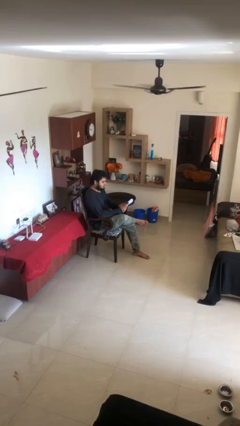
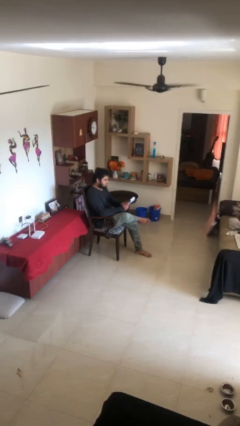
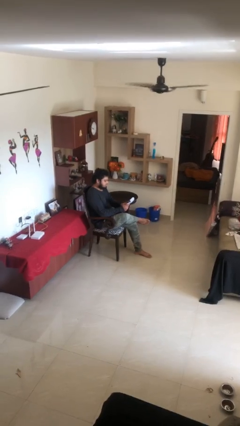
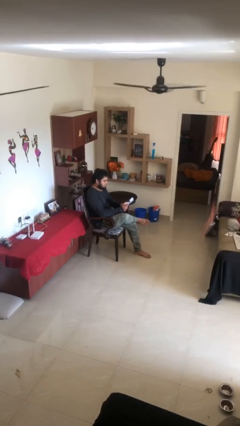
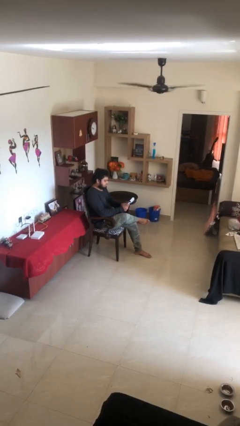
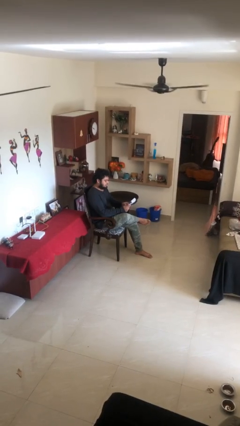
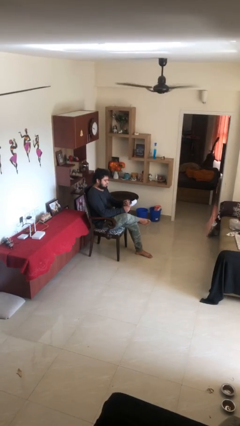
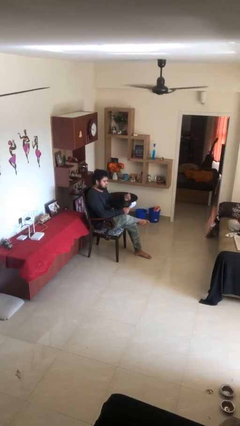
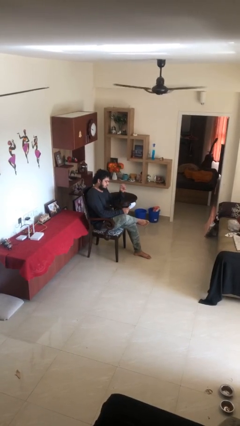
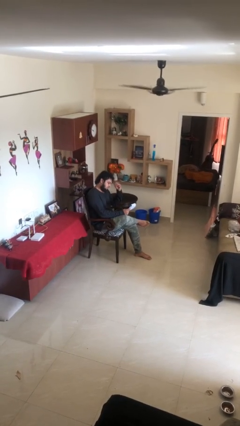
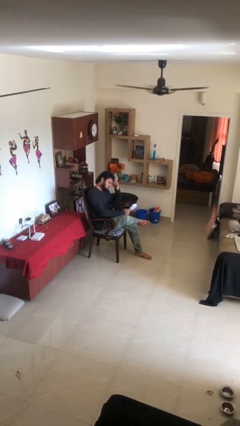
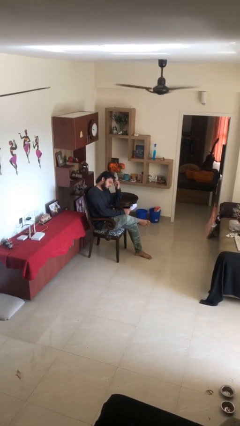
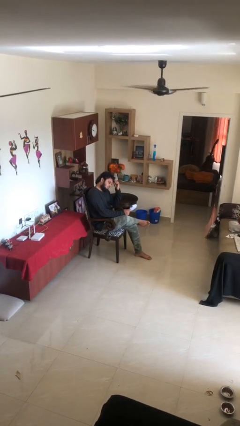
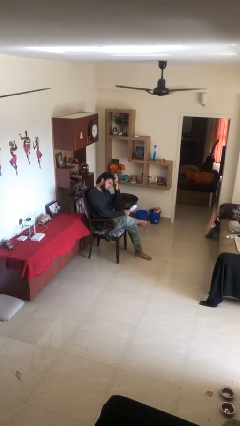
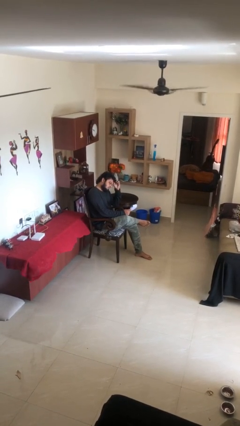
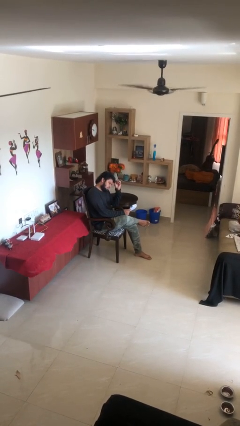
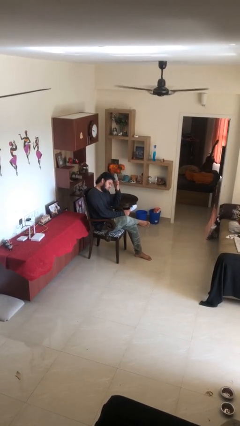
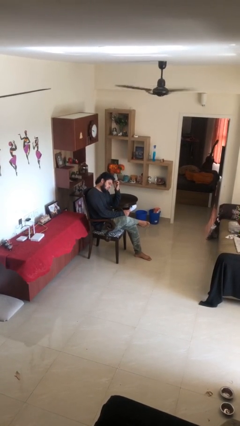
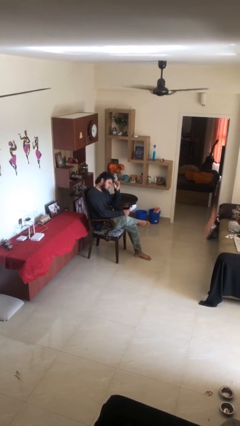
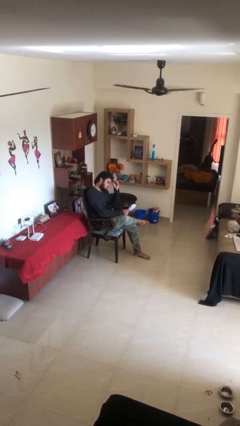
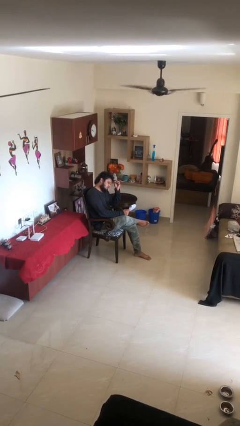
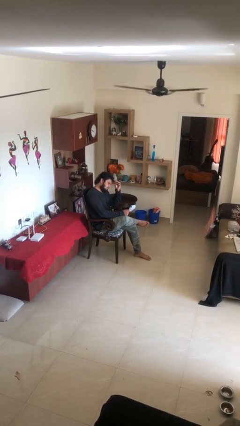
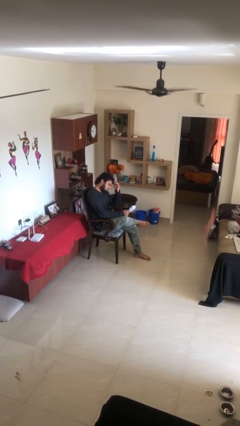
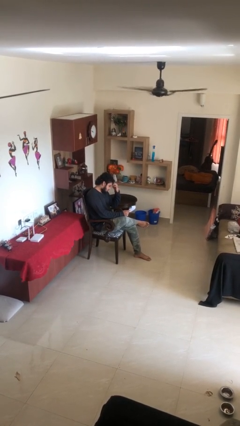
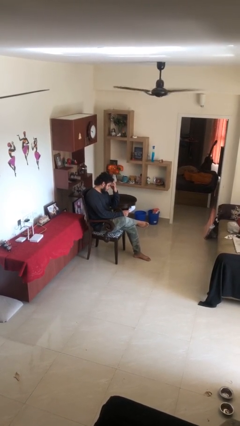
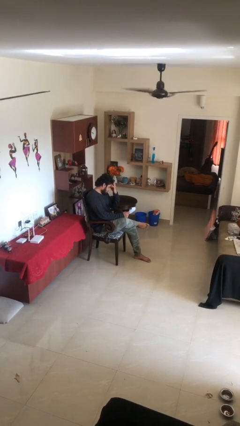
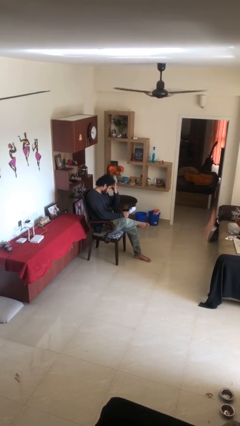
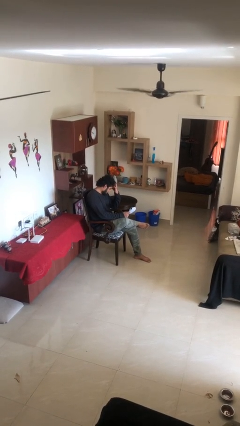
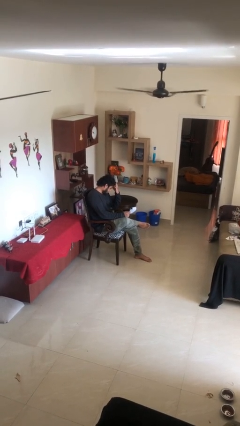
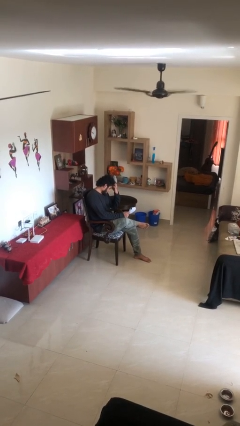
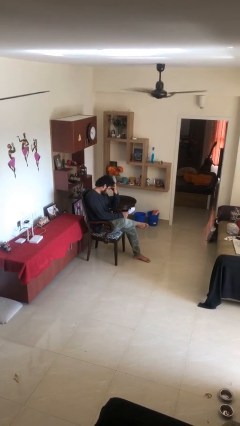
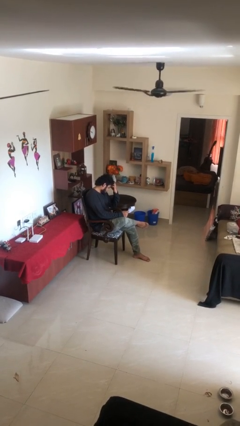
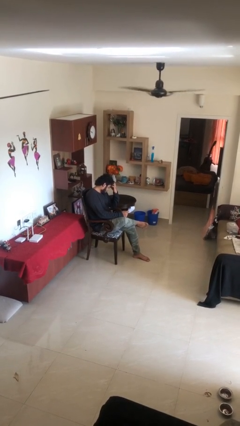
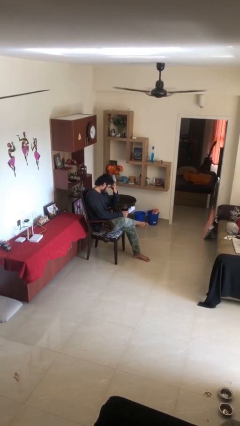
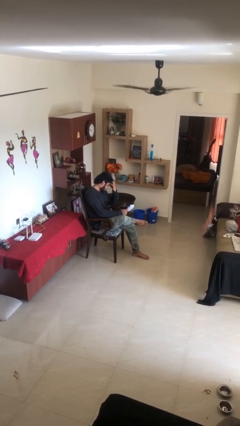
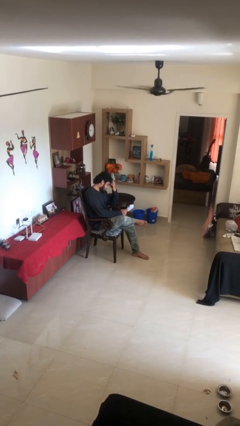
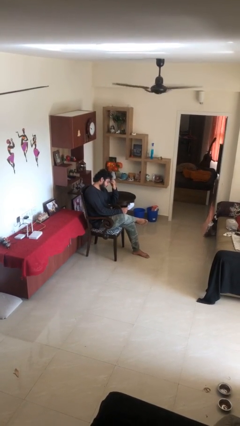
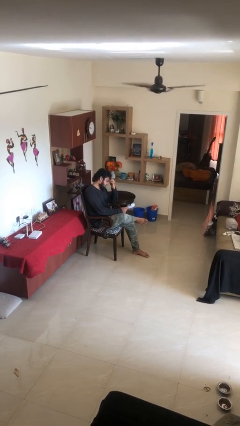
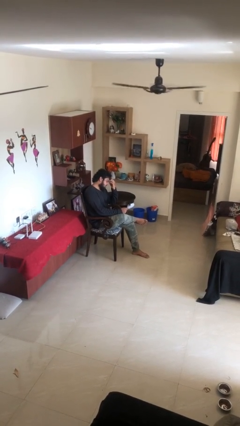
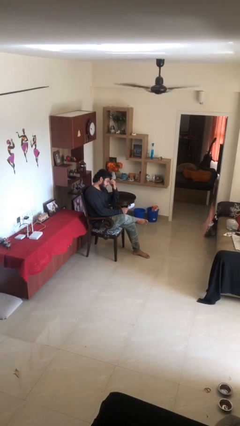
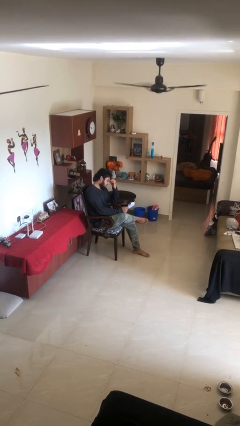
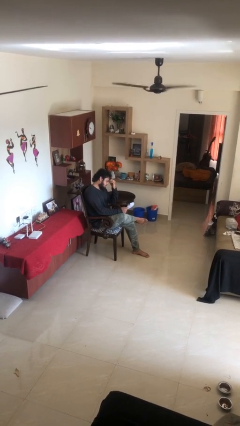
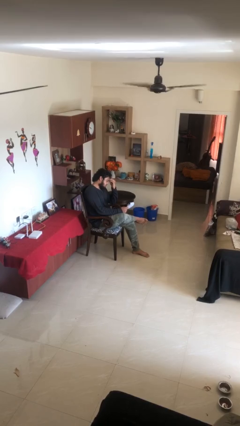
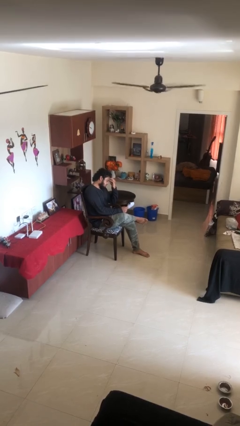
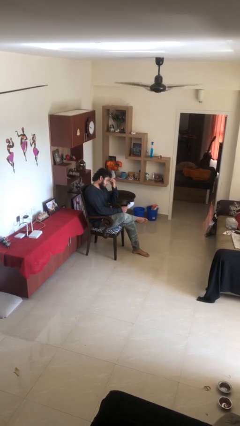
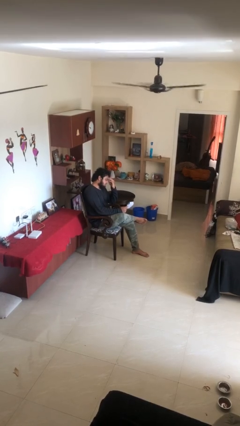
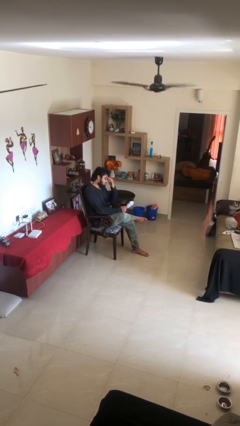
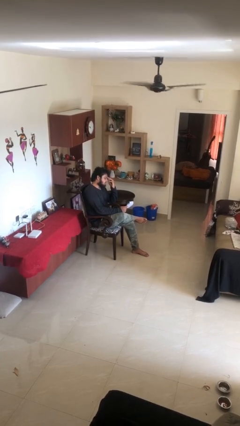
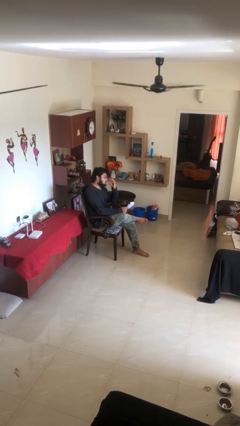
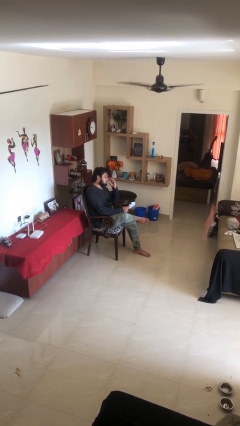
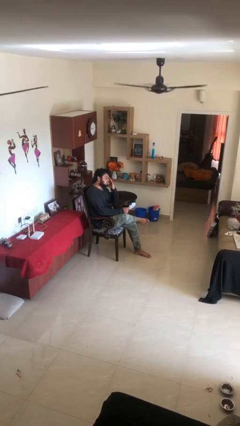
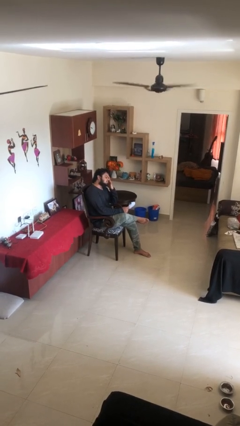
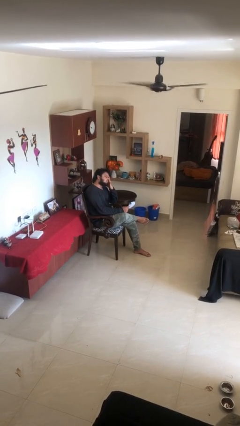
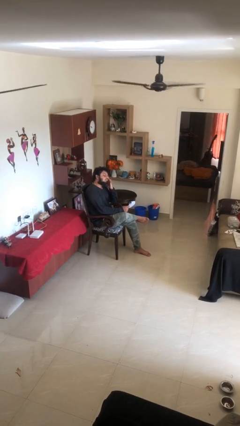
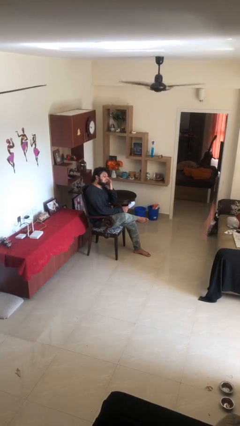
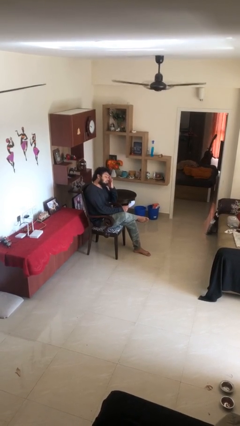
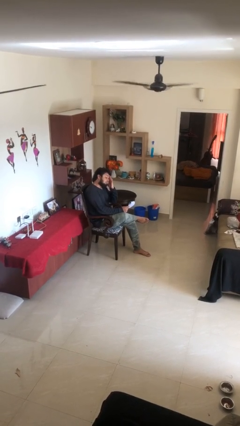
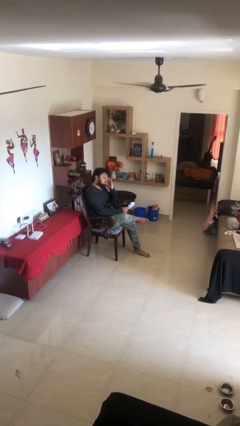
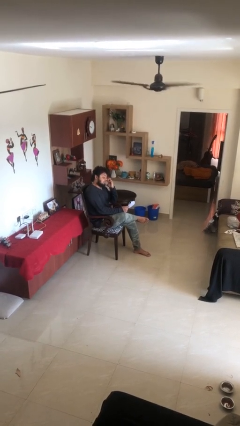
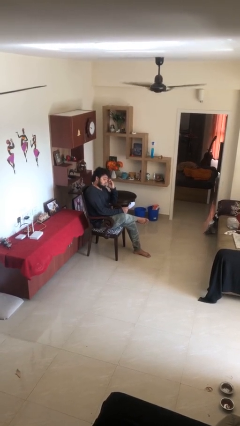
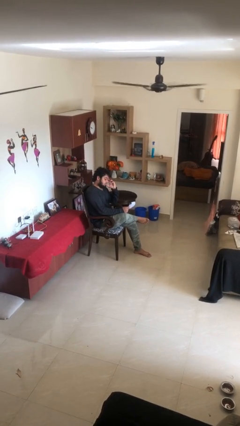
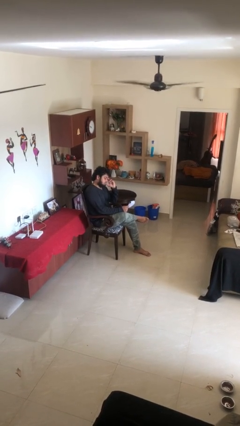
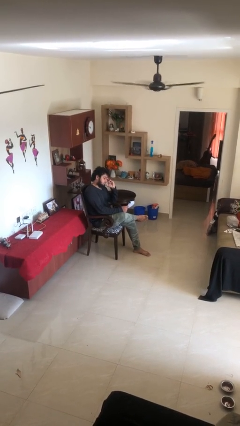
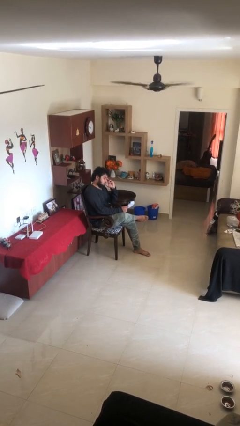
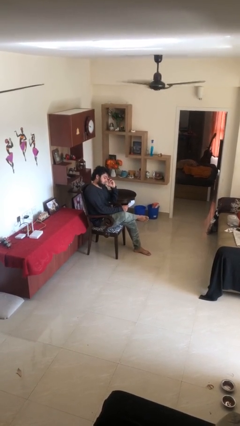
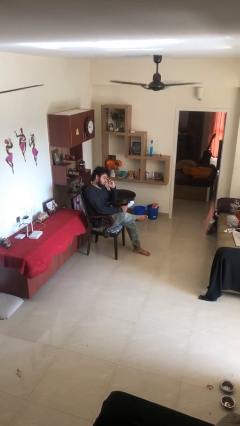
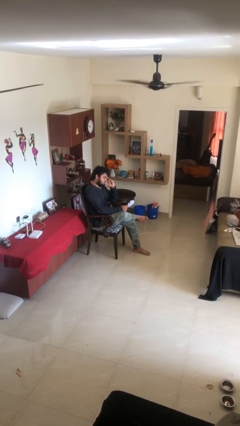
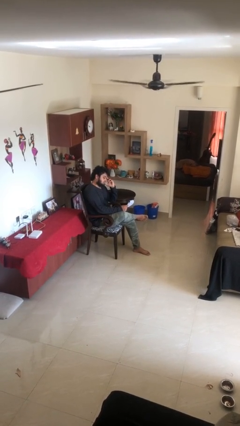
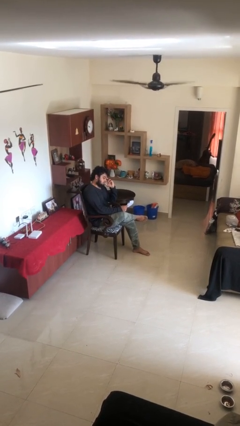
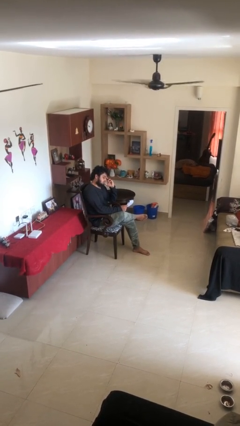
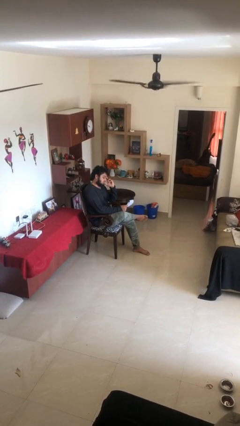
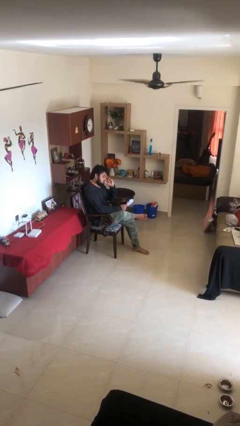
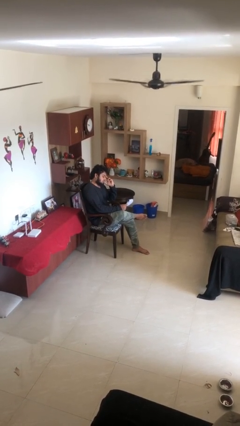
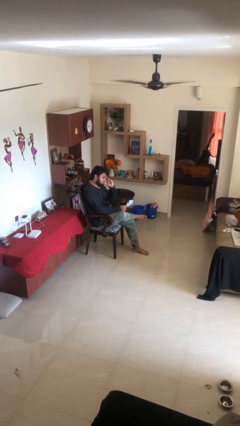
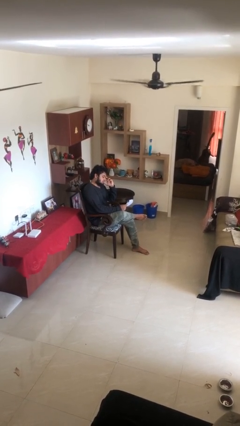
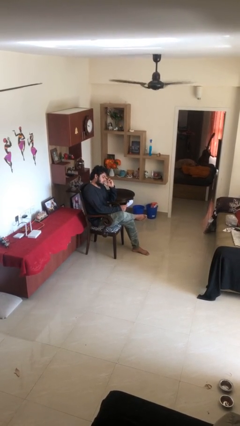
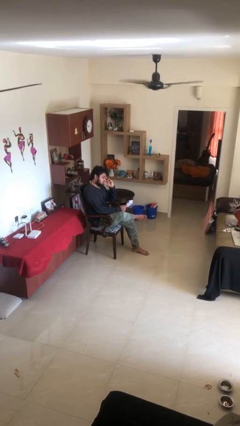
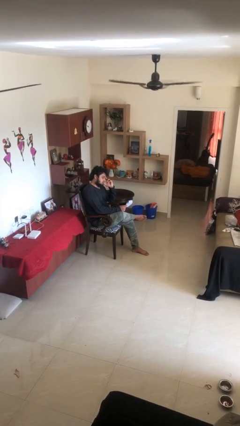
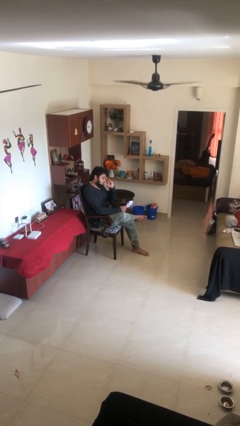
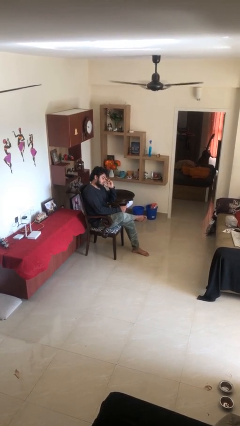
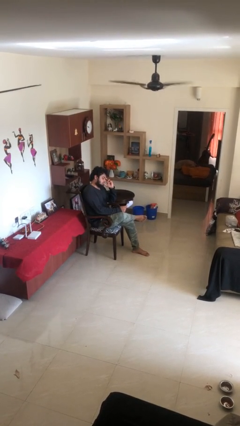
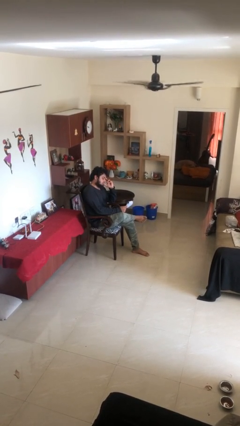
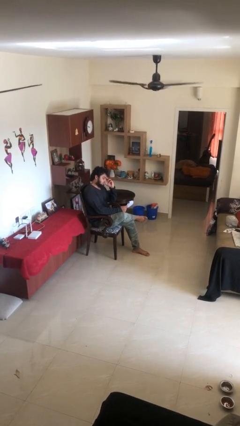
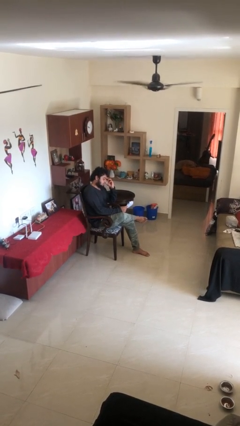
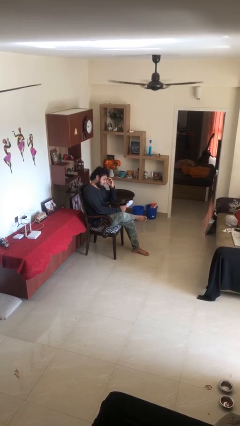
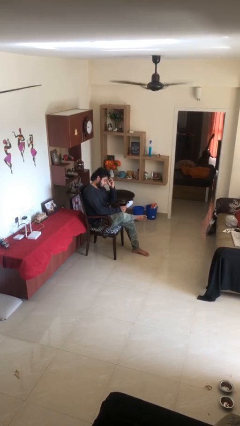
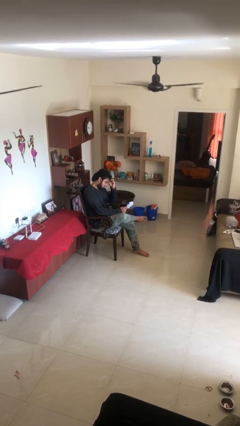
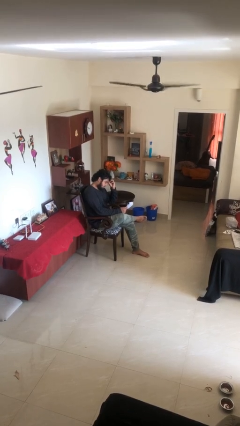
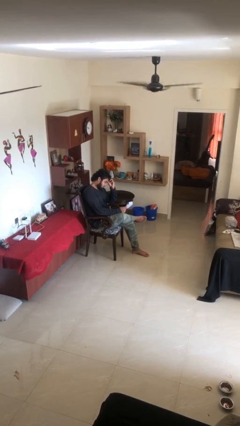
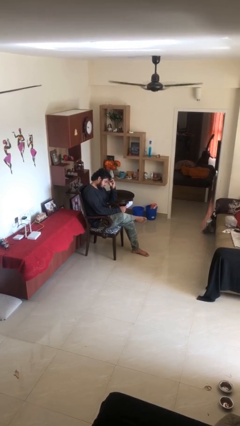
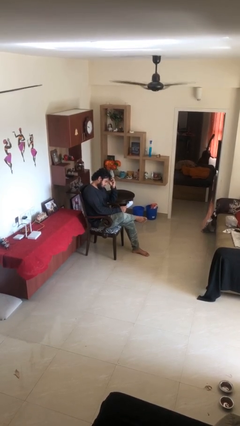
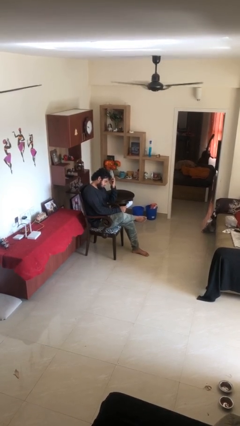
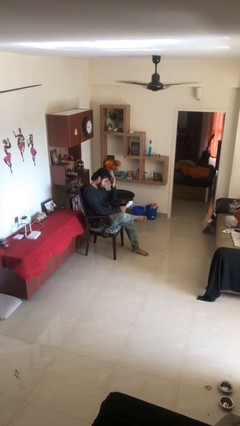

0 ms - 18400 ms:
person reads document

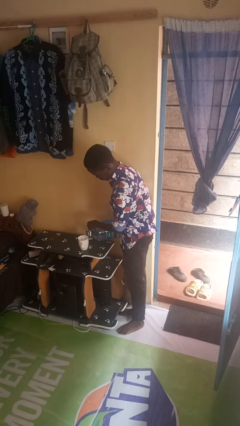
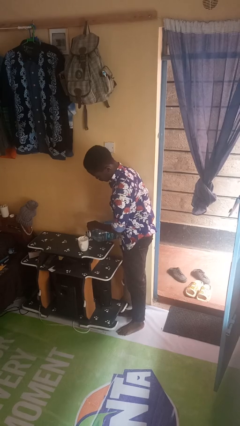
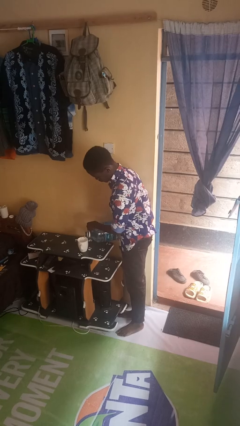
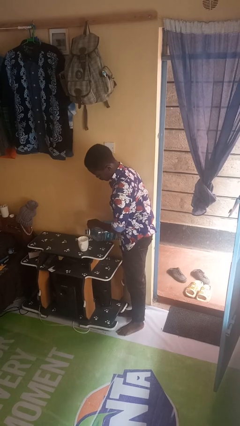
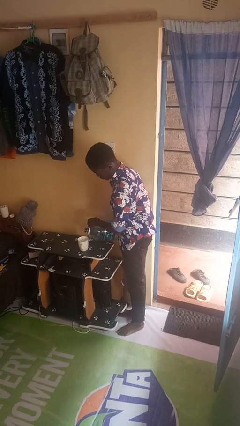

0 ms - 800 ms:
person pours liquid into cup
